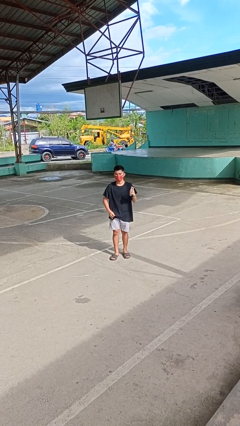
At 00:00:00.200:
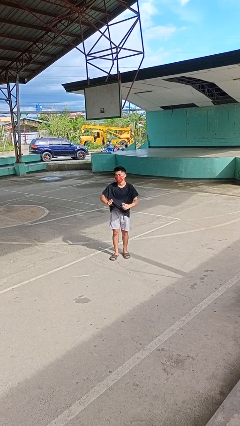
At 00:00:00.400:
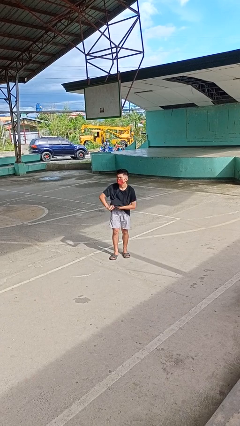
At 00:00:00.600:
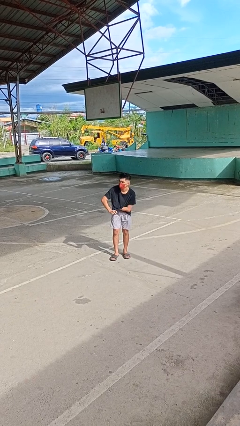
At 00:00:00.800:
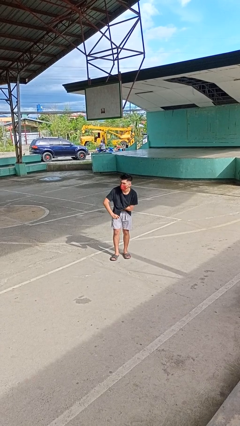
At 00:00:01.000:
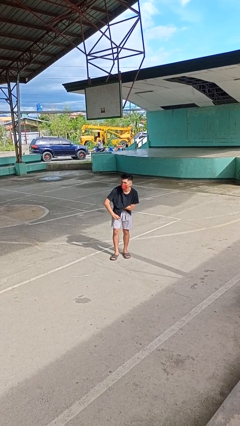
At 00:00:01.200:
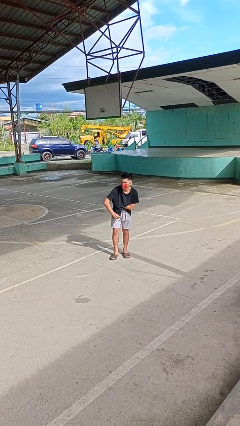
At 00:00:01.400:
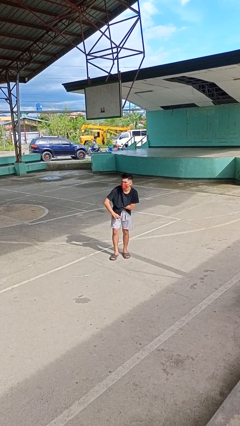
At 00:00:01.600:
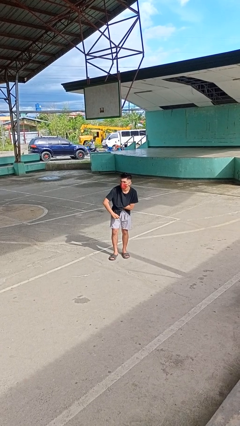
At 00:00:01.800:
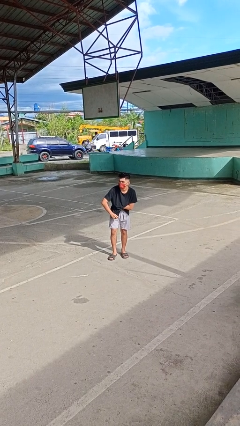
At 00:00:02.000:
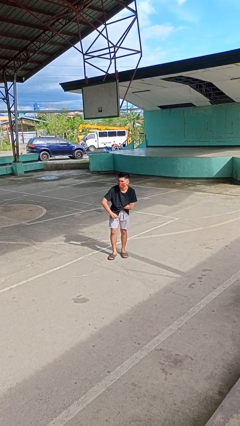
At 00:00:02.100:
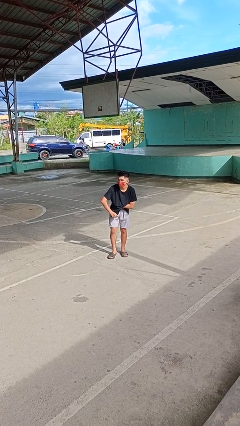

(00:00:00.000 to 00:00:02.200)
person applies deodorant

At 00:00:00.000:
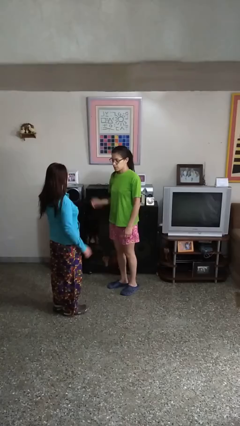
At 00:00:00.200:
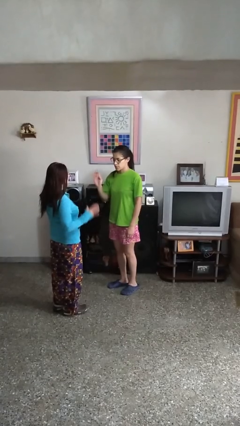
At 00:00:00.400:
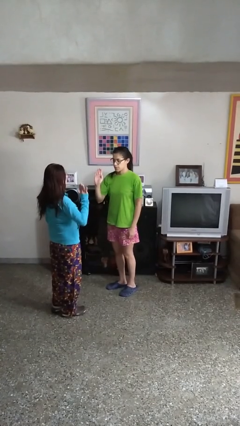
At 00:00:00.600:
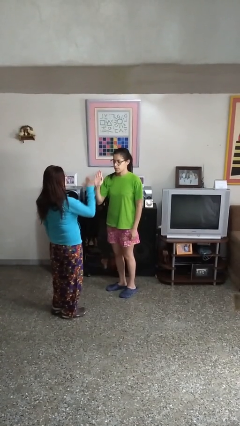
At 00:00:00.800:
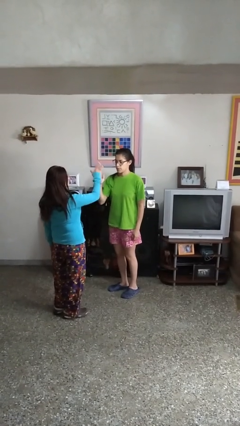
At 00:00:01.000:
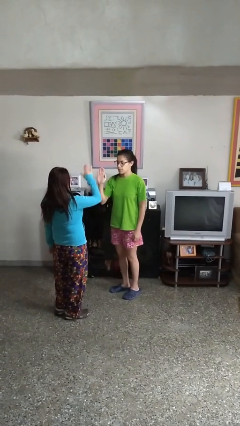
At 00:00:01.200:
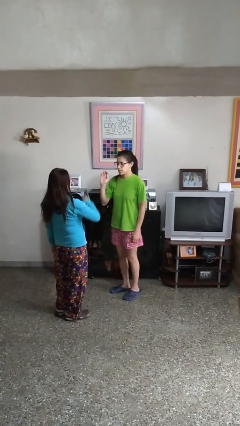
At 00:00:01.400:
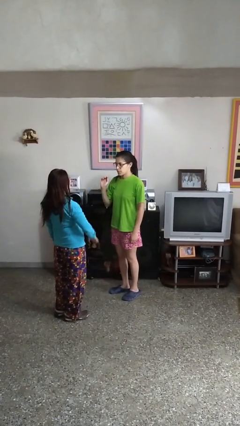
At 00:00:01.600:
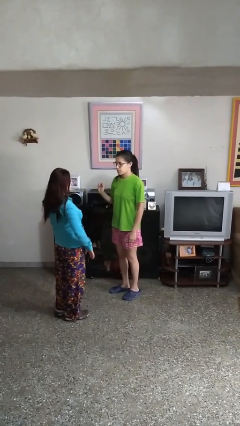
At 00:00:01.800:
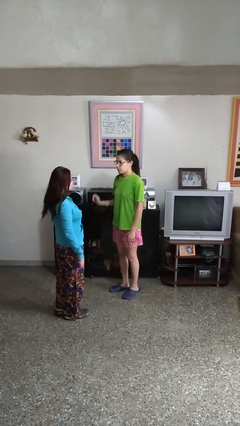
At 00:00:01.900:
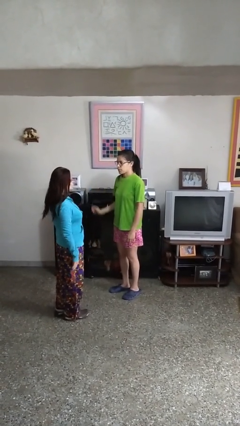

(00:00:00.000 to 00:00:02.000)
person highfives hand

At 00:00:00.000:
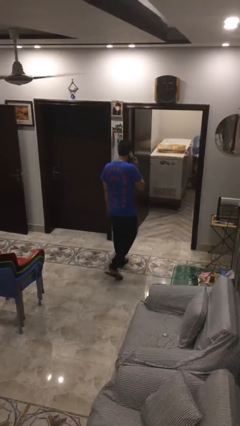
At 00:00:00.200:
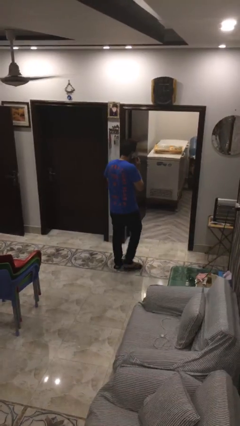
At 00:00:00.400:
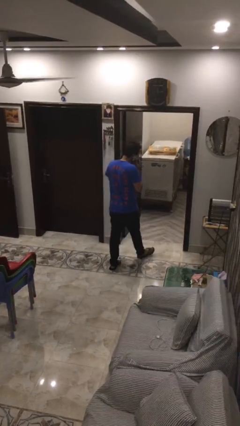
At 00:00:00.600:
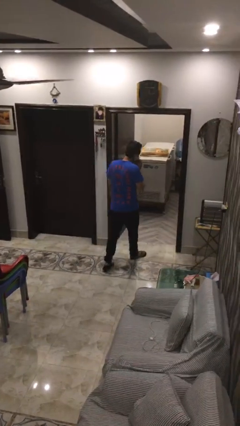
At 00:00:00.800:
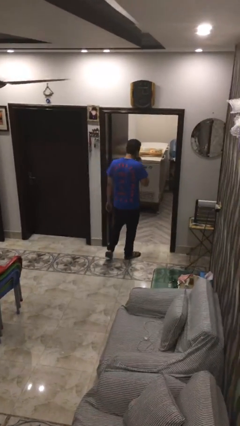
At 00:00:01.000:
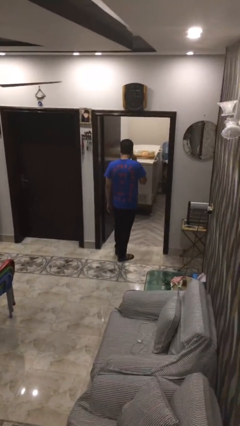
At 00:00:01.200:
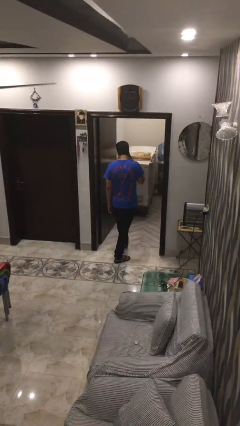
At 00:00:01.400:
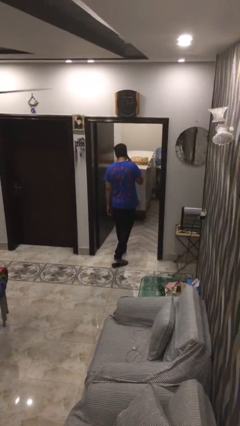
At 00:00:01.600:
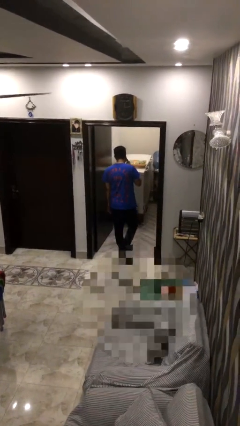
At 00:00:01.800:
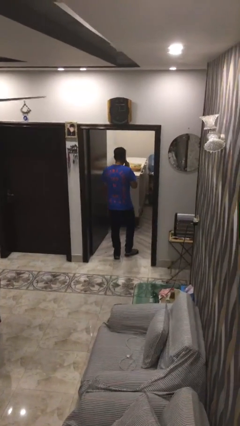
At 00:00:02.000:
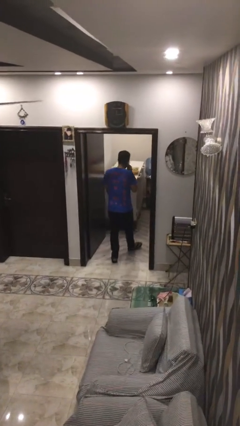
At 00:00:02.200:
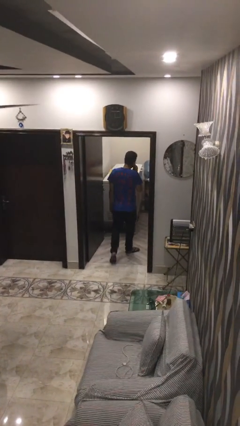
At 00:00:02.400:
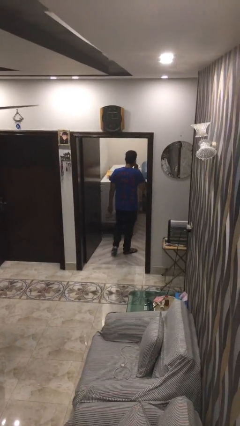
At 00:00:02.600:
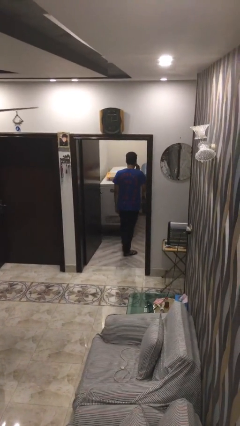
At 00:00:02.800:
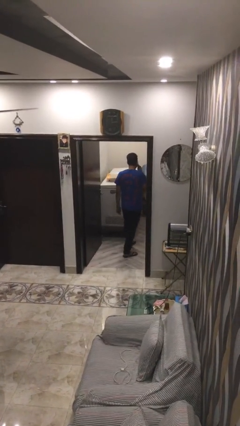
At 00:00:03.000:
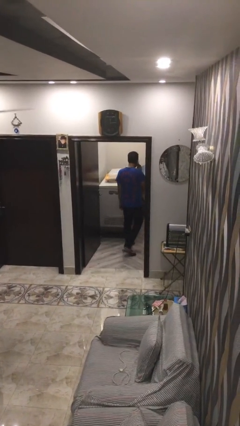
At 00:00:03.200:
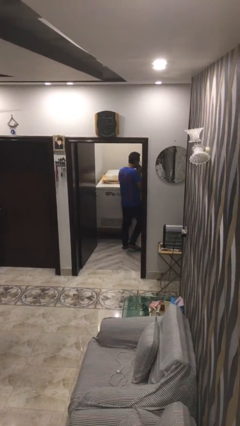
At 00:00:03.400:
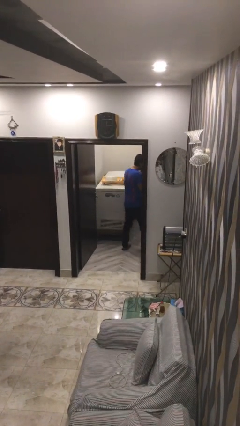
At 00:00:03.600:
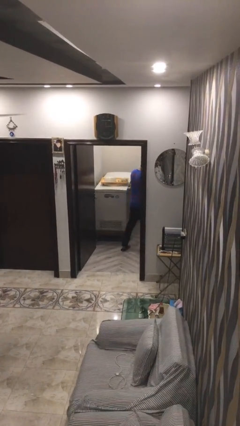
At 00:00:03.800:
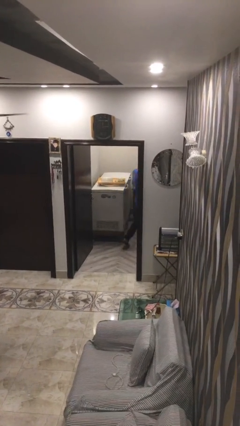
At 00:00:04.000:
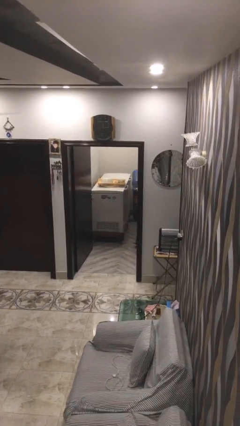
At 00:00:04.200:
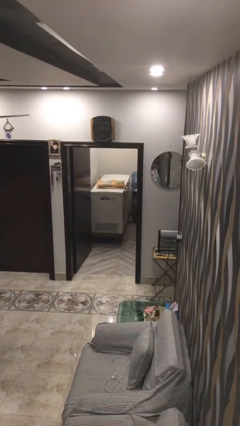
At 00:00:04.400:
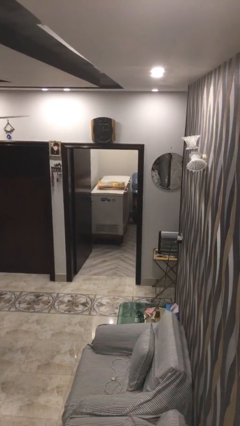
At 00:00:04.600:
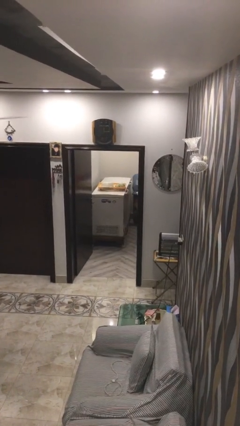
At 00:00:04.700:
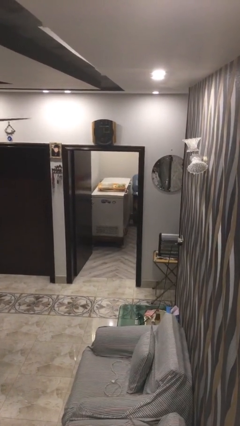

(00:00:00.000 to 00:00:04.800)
person exits scene through structure

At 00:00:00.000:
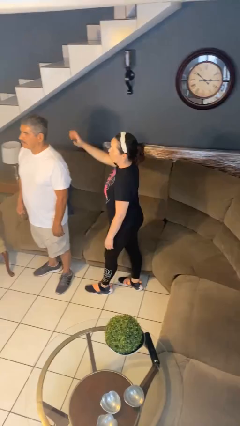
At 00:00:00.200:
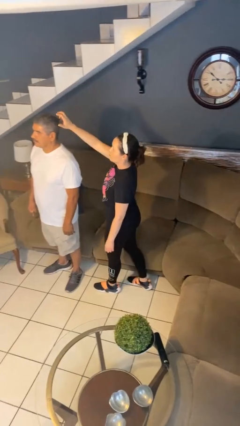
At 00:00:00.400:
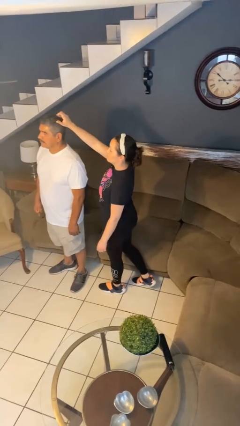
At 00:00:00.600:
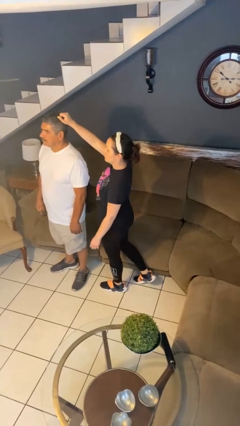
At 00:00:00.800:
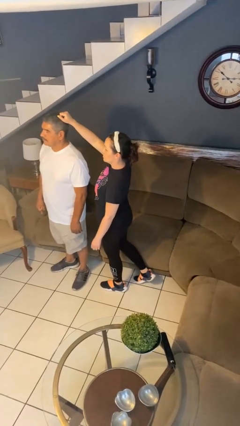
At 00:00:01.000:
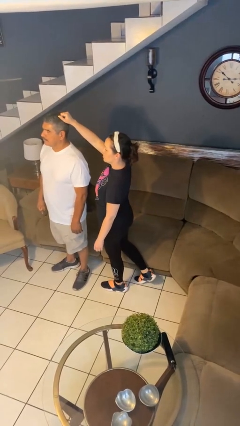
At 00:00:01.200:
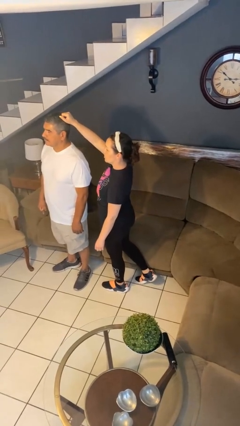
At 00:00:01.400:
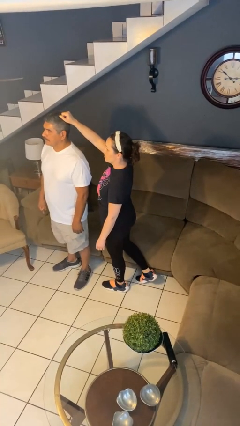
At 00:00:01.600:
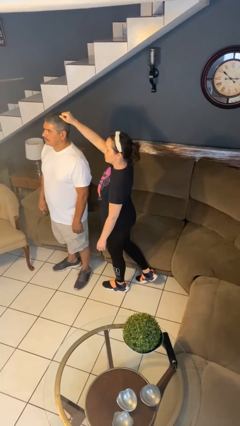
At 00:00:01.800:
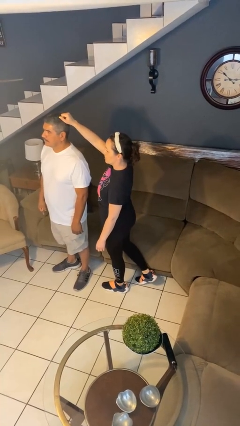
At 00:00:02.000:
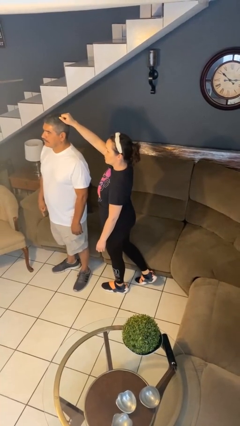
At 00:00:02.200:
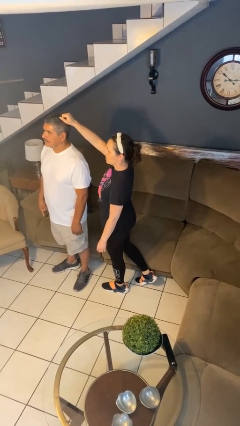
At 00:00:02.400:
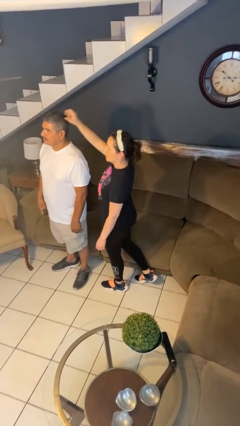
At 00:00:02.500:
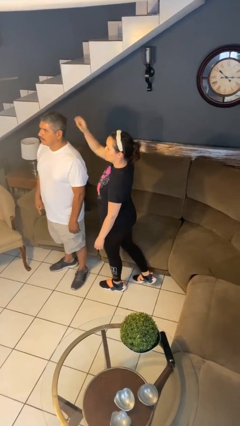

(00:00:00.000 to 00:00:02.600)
person grabs person by hair

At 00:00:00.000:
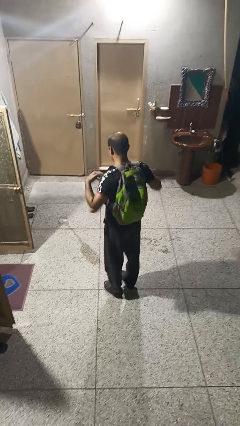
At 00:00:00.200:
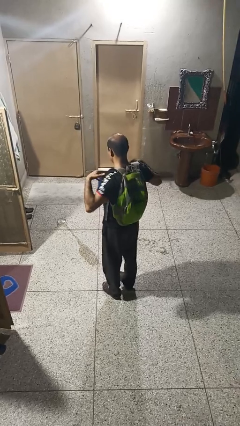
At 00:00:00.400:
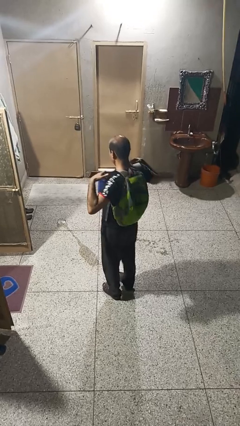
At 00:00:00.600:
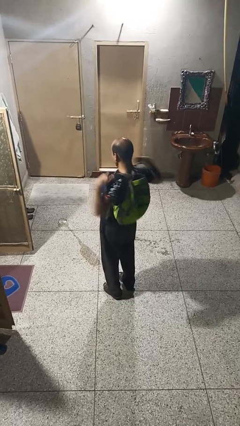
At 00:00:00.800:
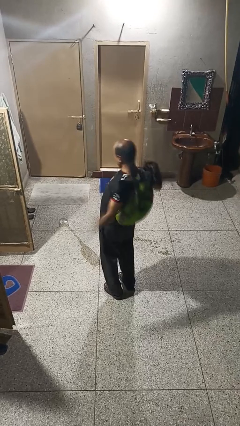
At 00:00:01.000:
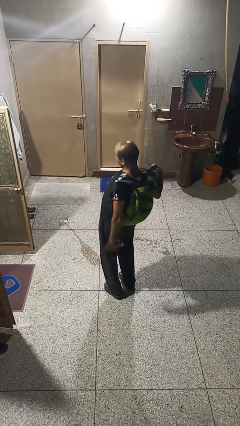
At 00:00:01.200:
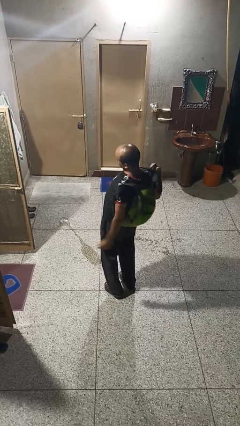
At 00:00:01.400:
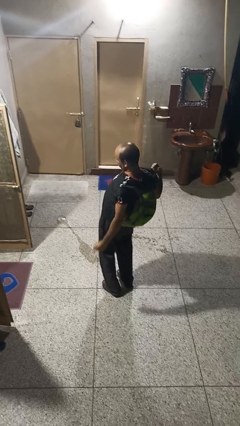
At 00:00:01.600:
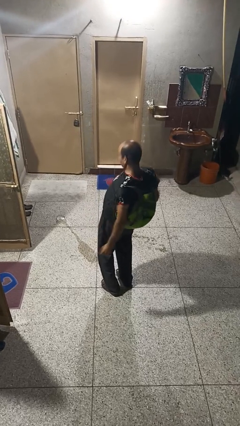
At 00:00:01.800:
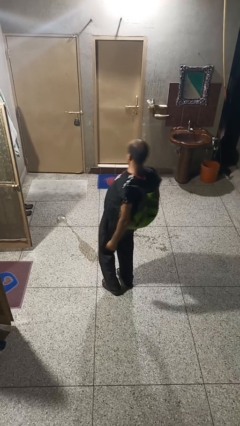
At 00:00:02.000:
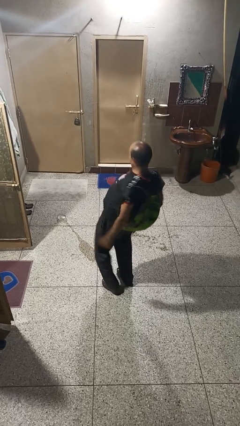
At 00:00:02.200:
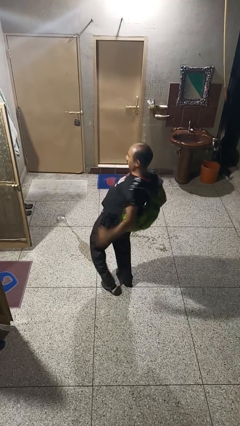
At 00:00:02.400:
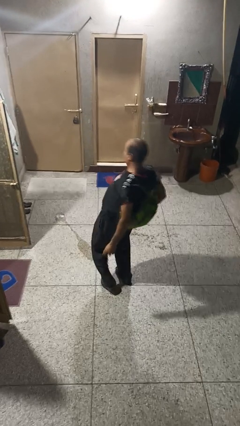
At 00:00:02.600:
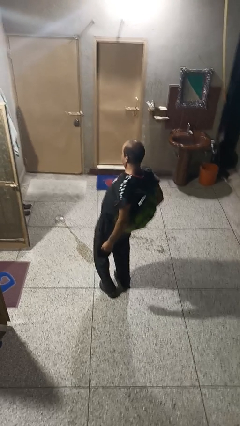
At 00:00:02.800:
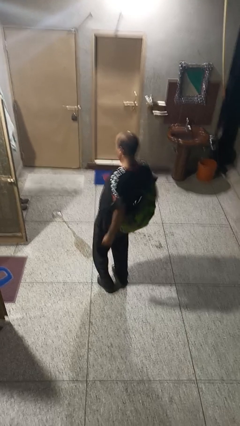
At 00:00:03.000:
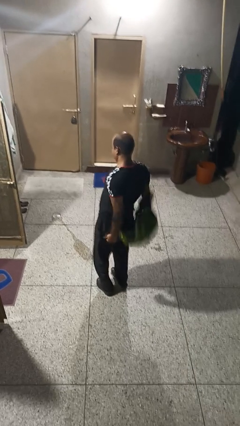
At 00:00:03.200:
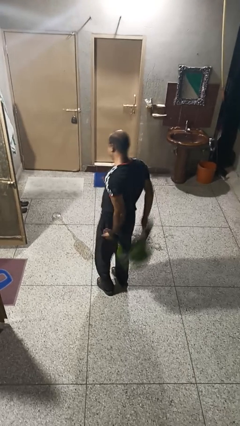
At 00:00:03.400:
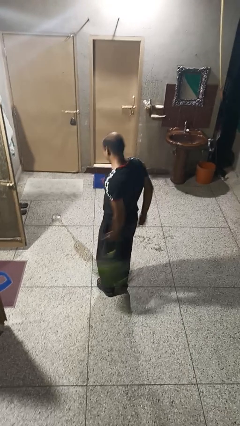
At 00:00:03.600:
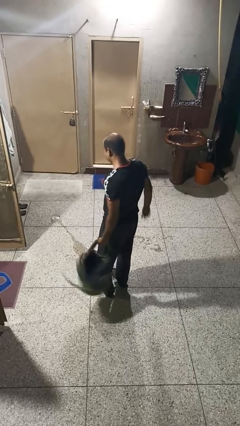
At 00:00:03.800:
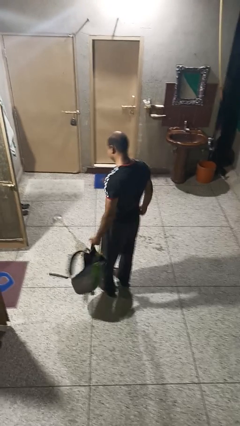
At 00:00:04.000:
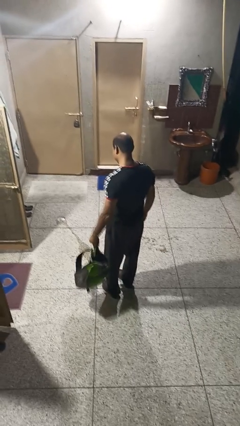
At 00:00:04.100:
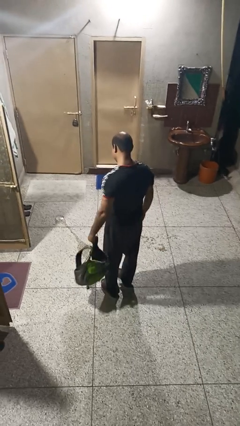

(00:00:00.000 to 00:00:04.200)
person takes off backpack

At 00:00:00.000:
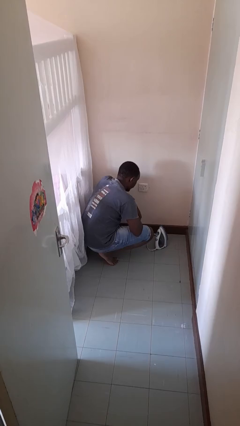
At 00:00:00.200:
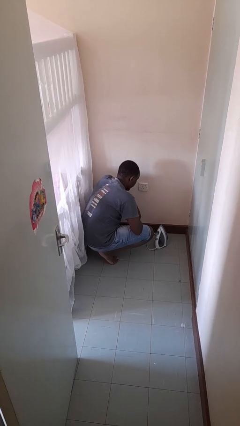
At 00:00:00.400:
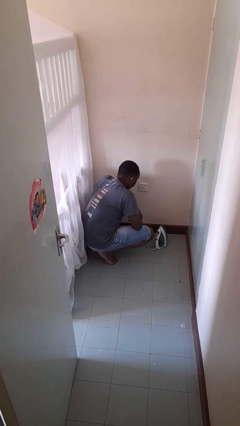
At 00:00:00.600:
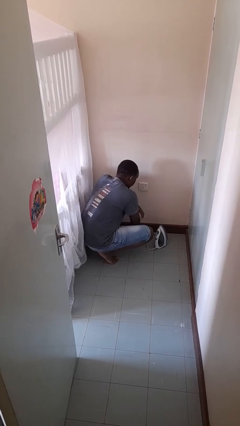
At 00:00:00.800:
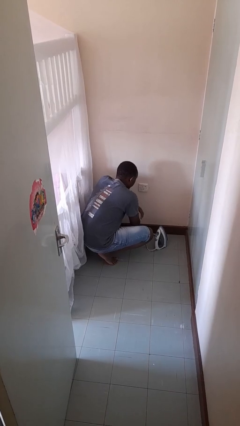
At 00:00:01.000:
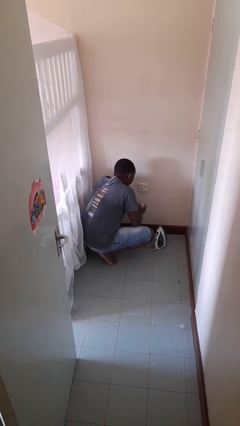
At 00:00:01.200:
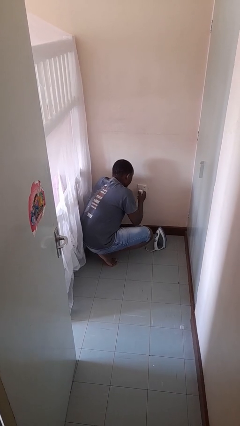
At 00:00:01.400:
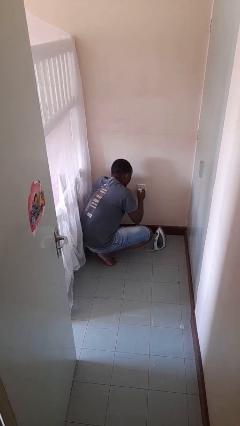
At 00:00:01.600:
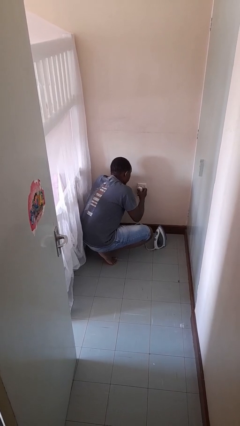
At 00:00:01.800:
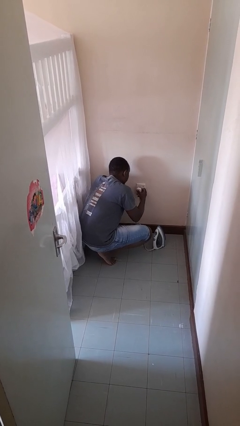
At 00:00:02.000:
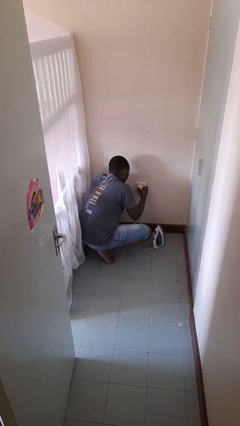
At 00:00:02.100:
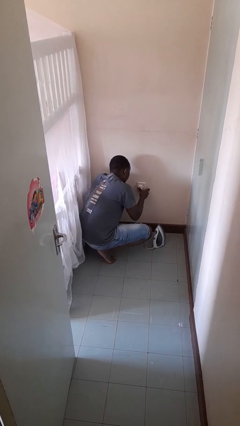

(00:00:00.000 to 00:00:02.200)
person plugs into electrical socket
